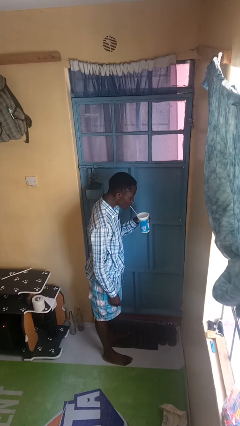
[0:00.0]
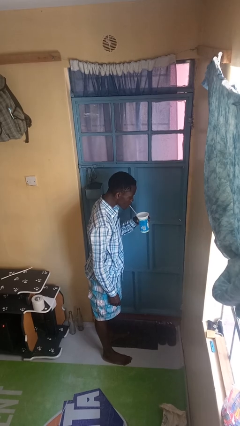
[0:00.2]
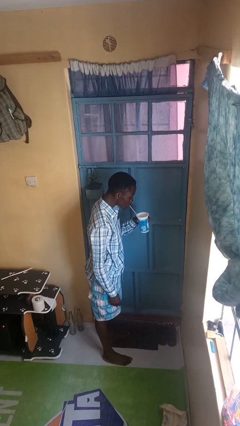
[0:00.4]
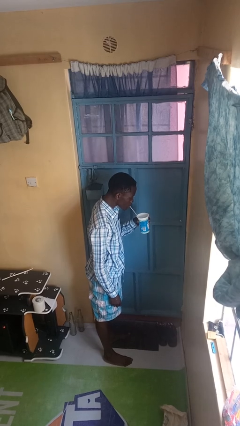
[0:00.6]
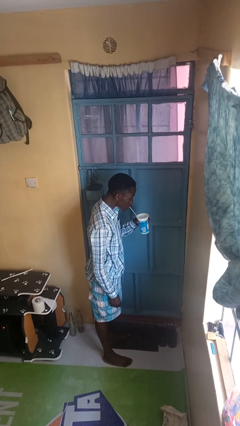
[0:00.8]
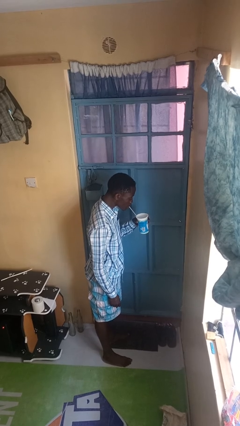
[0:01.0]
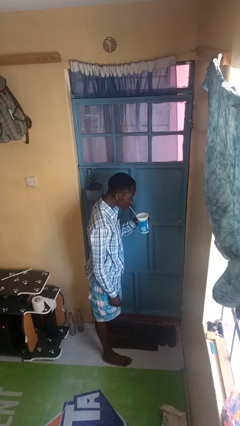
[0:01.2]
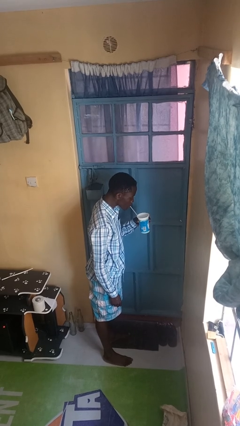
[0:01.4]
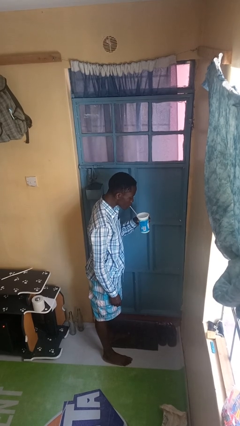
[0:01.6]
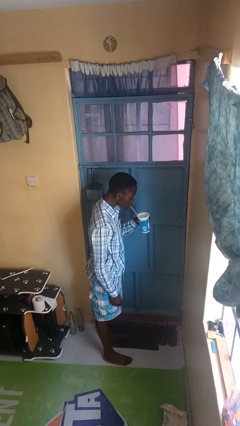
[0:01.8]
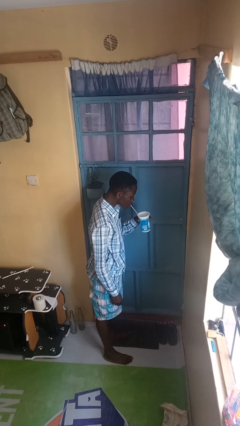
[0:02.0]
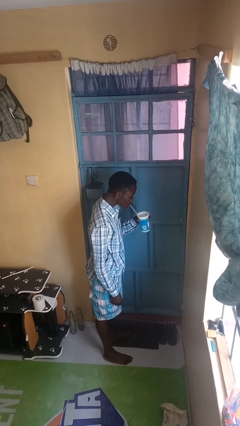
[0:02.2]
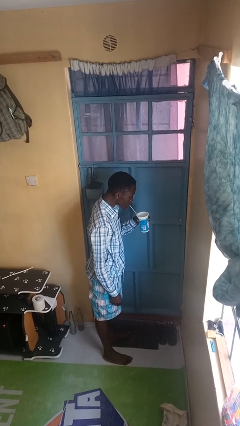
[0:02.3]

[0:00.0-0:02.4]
person drinks from straw

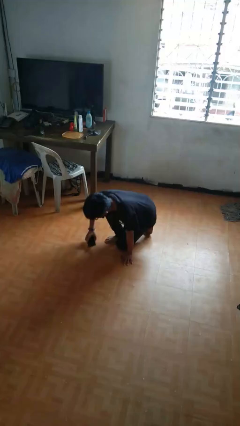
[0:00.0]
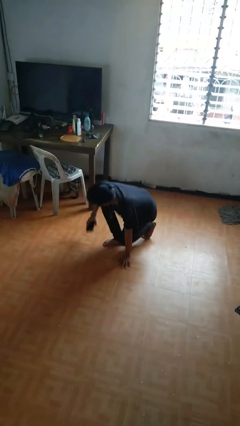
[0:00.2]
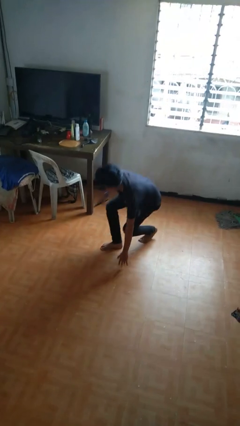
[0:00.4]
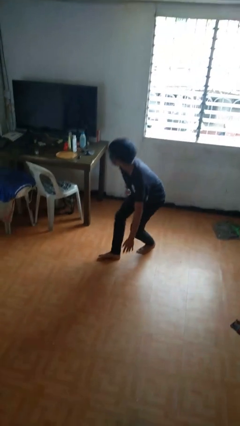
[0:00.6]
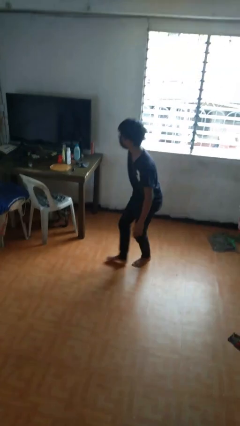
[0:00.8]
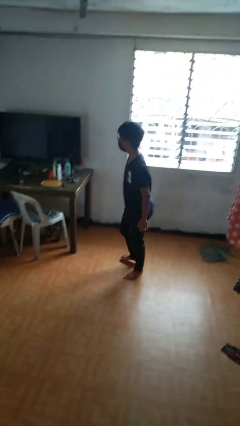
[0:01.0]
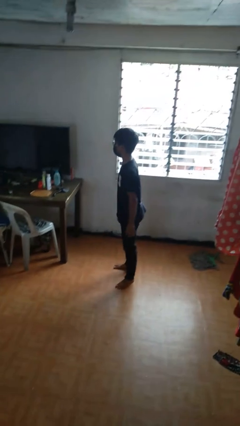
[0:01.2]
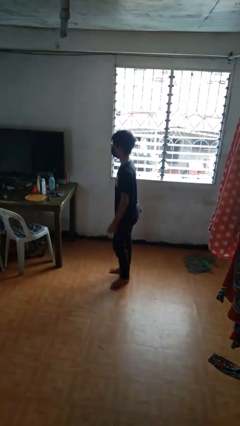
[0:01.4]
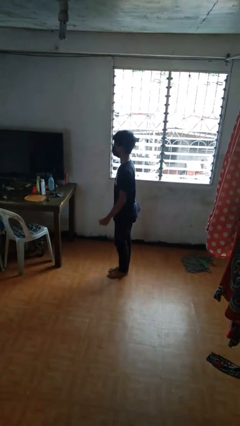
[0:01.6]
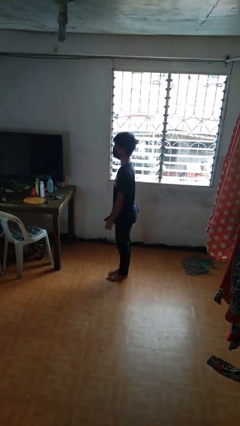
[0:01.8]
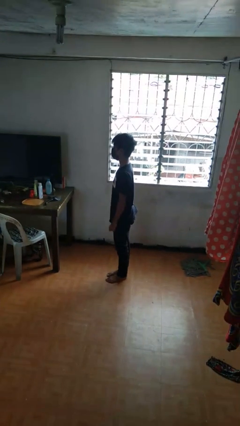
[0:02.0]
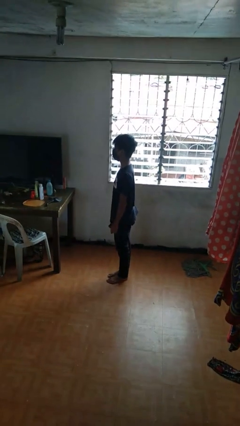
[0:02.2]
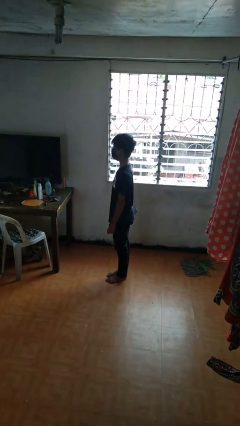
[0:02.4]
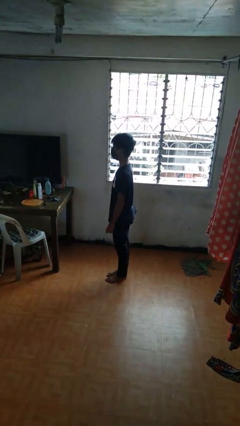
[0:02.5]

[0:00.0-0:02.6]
person stands up from floor

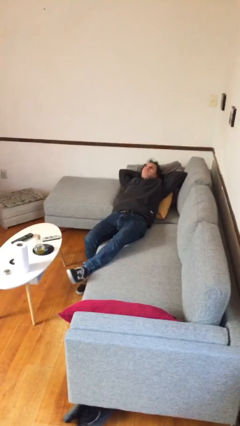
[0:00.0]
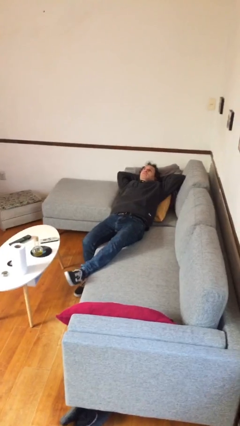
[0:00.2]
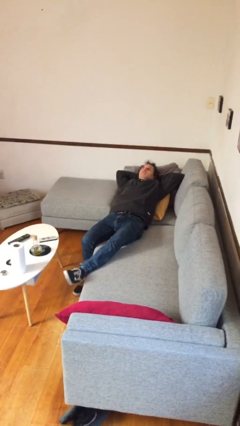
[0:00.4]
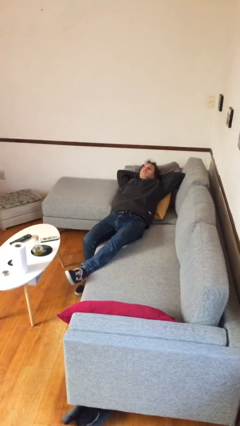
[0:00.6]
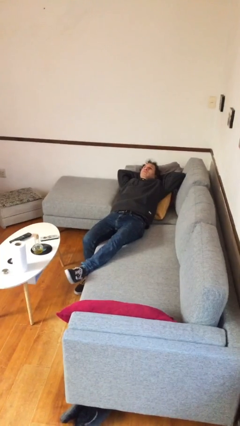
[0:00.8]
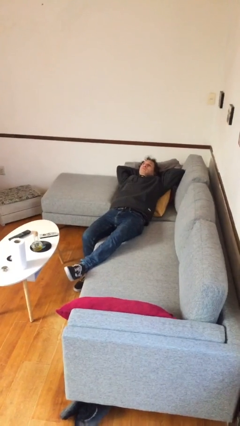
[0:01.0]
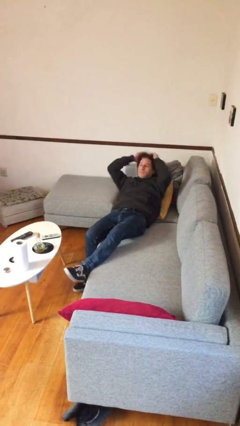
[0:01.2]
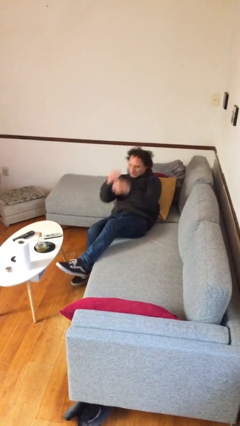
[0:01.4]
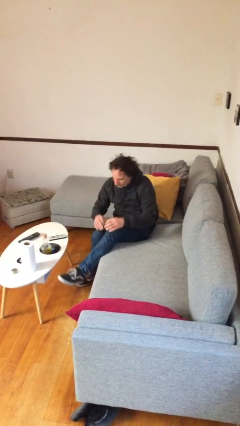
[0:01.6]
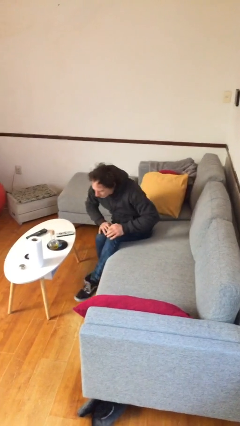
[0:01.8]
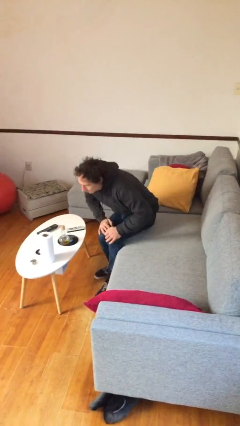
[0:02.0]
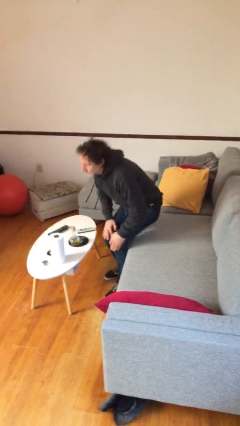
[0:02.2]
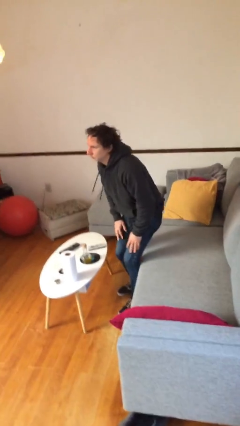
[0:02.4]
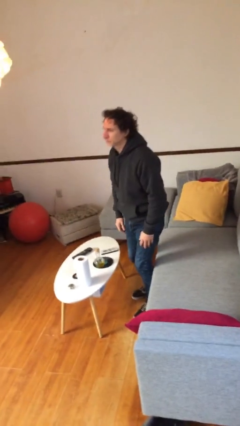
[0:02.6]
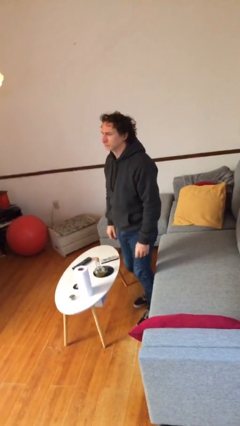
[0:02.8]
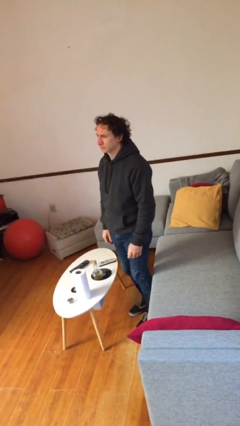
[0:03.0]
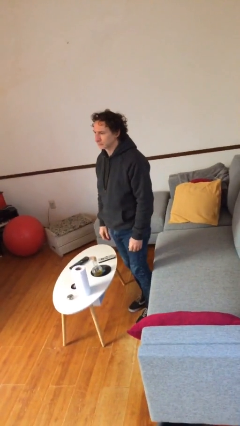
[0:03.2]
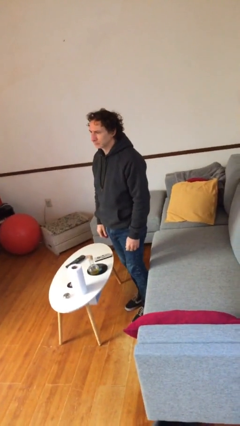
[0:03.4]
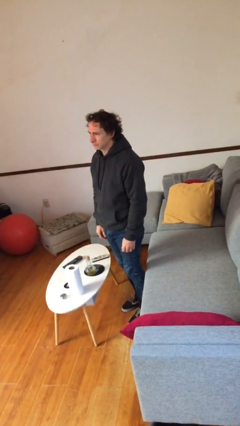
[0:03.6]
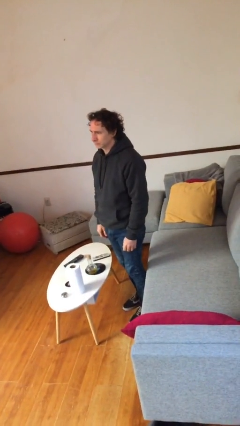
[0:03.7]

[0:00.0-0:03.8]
person stands up

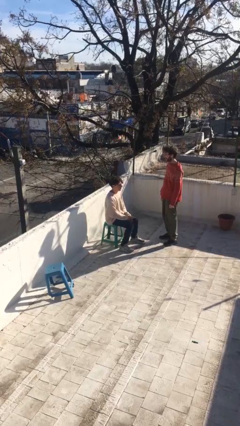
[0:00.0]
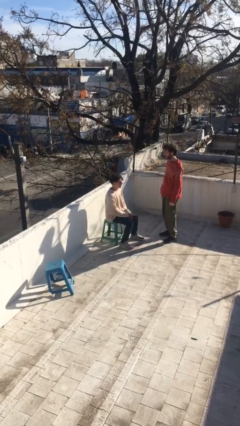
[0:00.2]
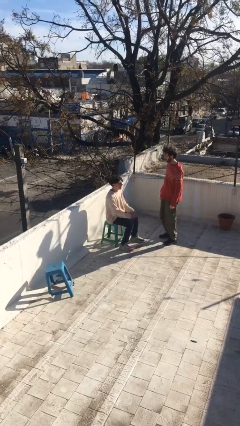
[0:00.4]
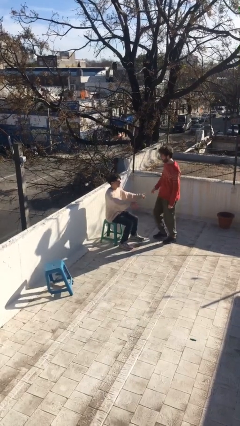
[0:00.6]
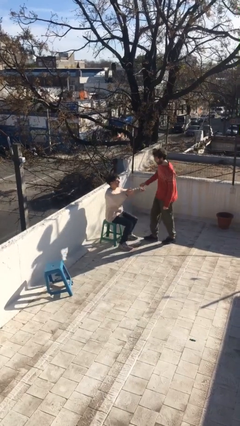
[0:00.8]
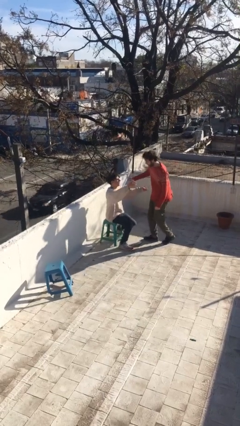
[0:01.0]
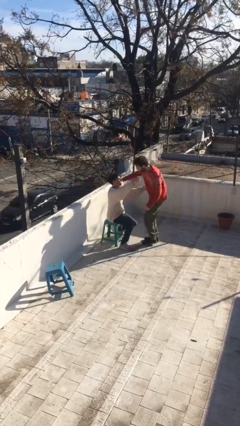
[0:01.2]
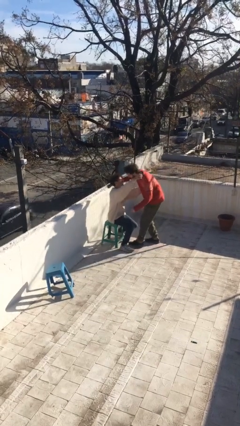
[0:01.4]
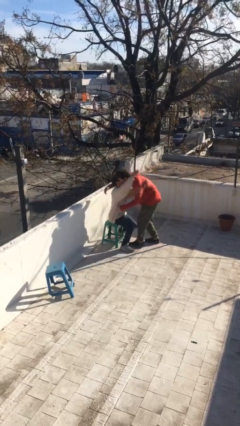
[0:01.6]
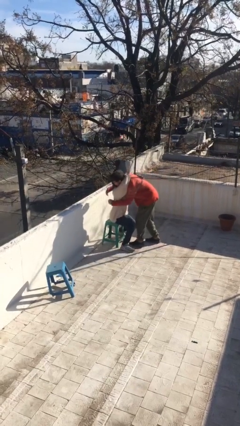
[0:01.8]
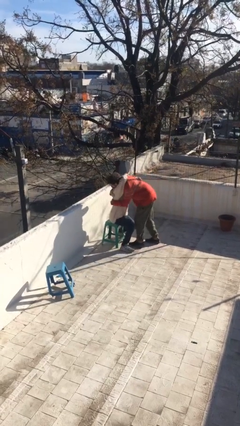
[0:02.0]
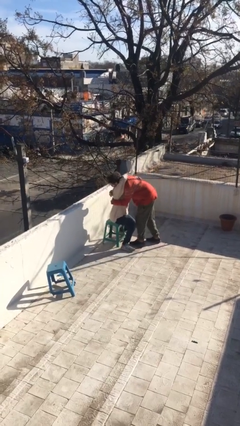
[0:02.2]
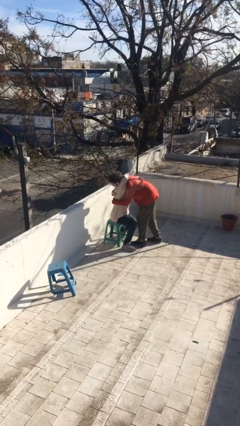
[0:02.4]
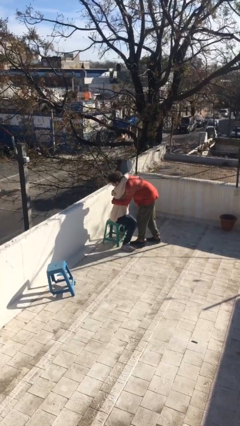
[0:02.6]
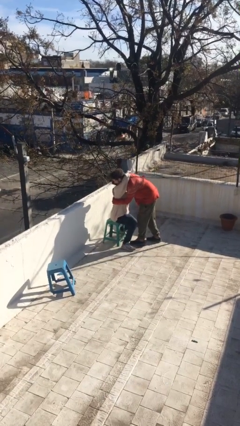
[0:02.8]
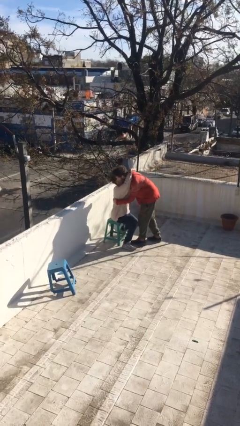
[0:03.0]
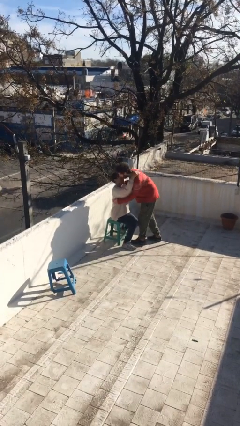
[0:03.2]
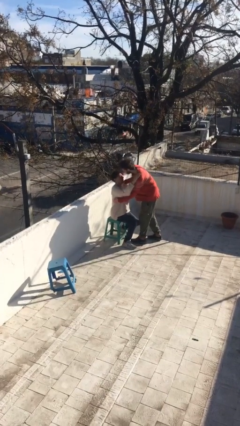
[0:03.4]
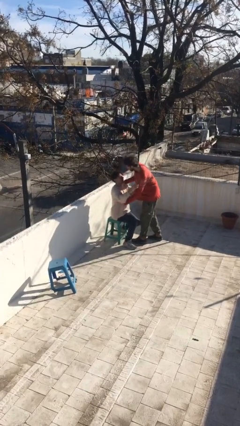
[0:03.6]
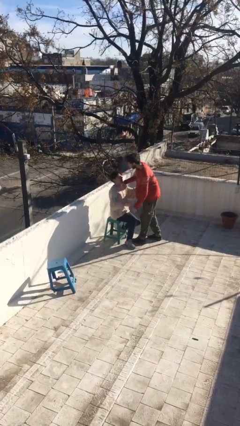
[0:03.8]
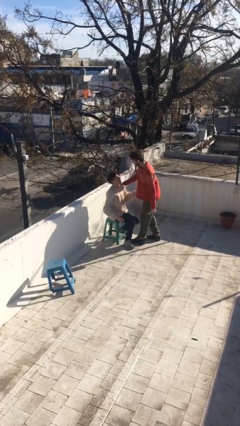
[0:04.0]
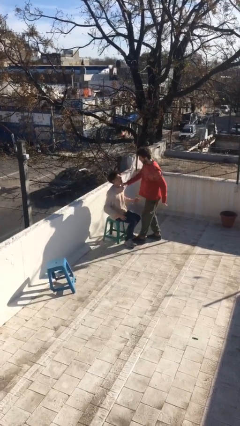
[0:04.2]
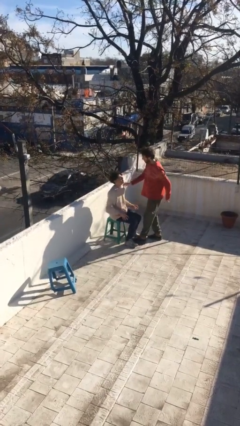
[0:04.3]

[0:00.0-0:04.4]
person embraces person

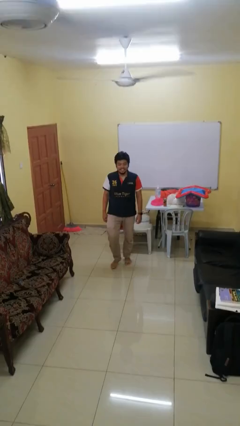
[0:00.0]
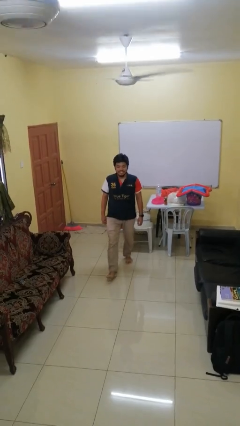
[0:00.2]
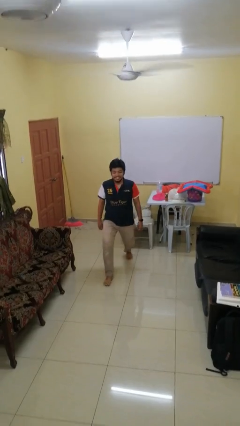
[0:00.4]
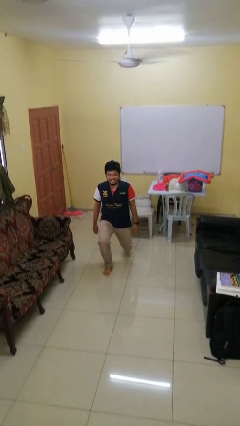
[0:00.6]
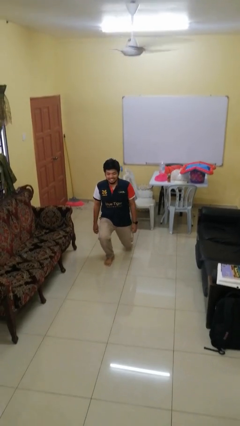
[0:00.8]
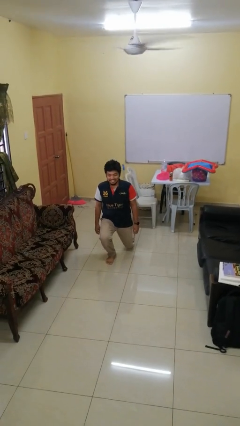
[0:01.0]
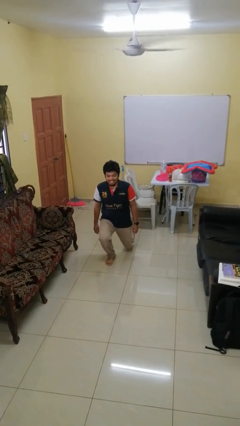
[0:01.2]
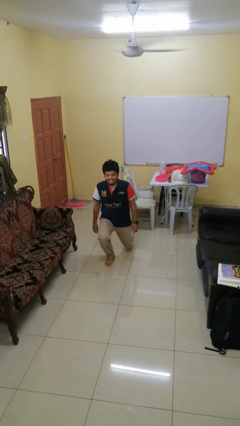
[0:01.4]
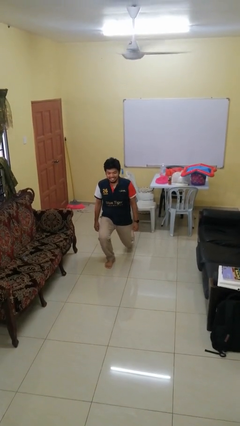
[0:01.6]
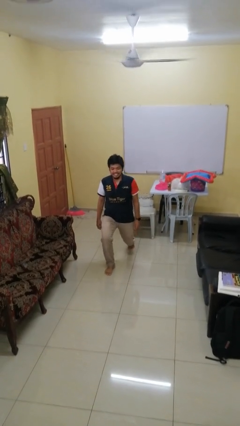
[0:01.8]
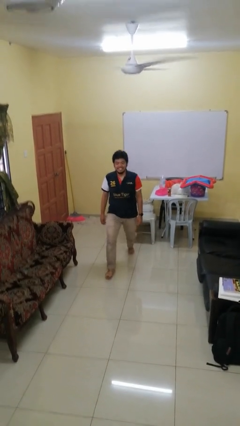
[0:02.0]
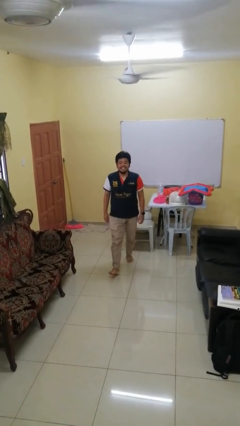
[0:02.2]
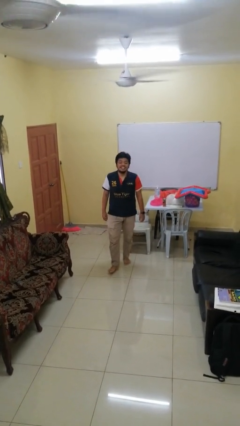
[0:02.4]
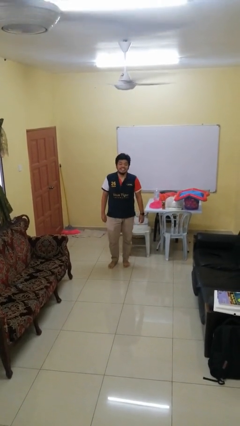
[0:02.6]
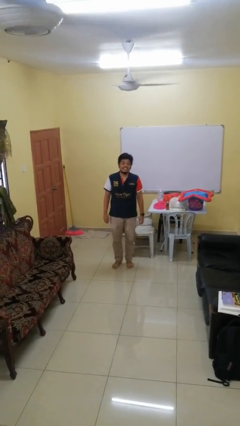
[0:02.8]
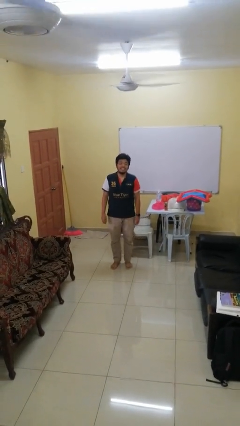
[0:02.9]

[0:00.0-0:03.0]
person exercises with lunges

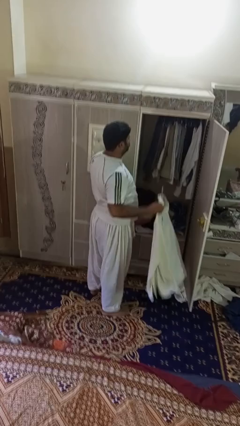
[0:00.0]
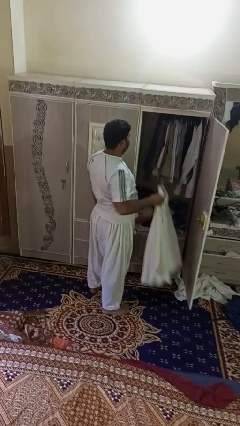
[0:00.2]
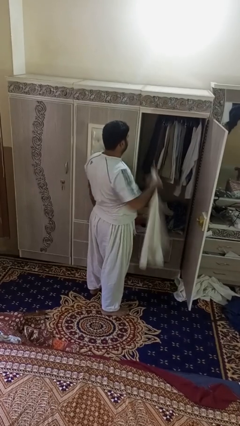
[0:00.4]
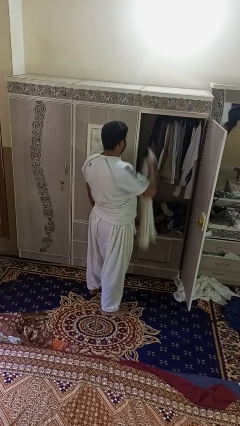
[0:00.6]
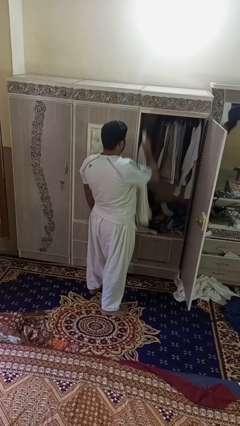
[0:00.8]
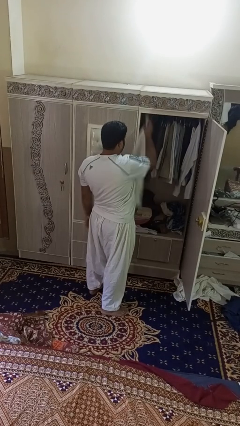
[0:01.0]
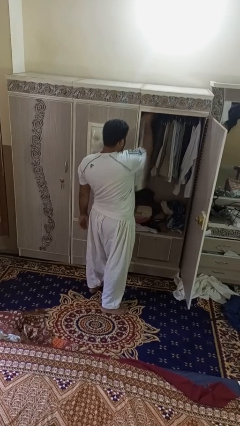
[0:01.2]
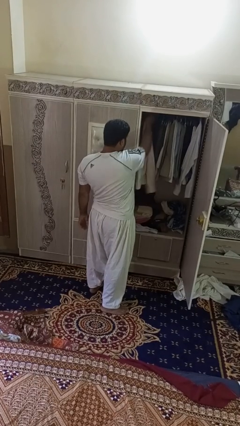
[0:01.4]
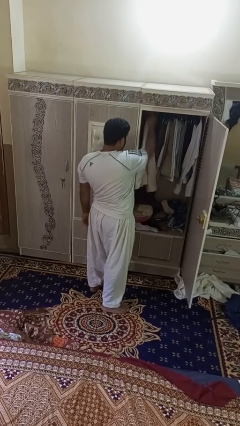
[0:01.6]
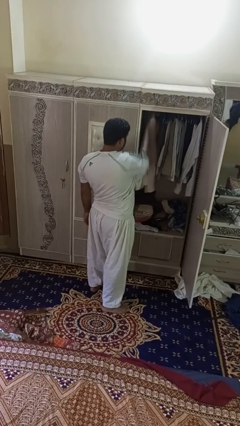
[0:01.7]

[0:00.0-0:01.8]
person puts clothes into closet
